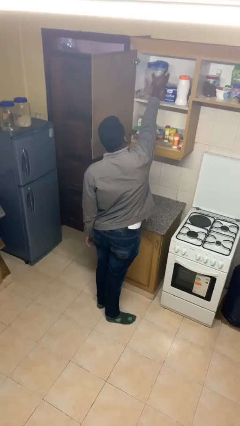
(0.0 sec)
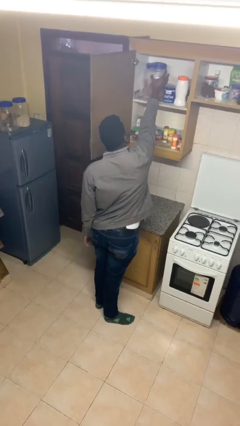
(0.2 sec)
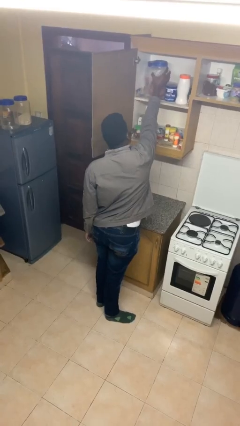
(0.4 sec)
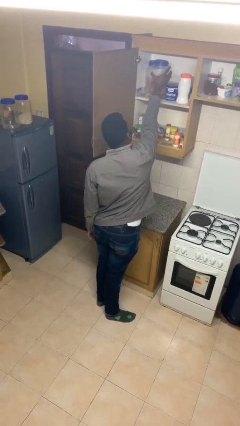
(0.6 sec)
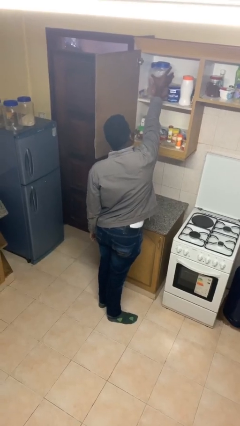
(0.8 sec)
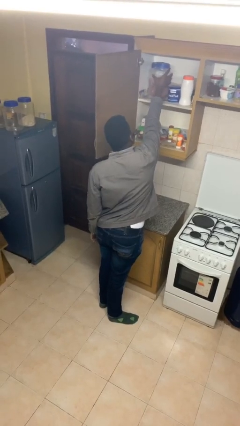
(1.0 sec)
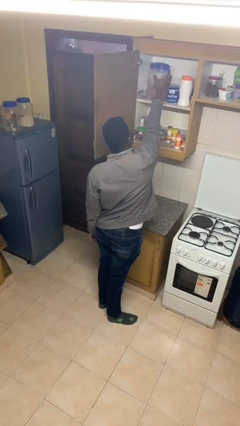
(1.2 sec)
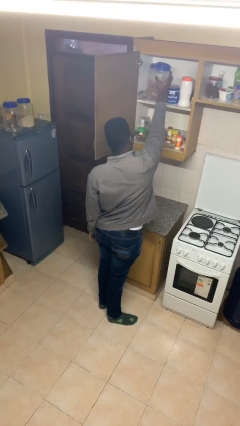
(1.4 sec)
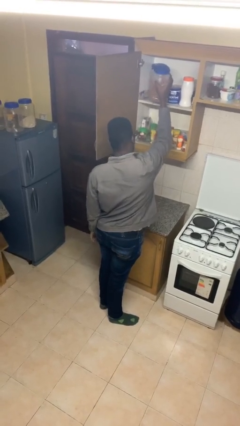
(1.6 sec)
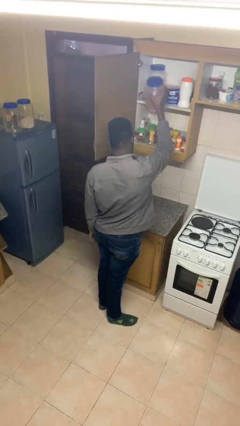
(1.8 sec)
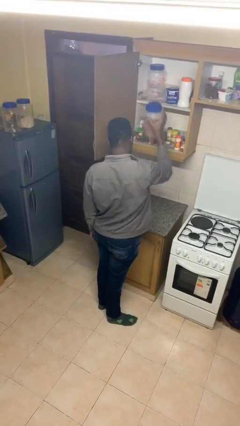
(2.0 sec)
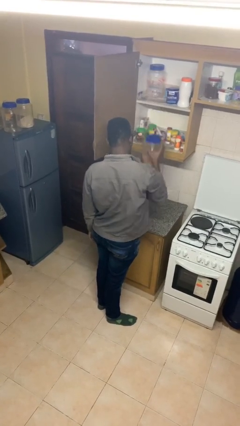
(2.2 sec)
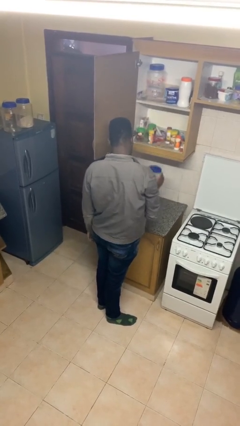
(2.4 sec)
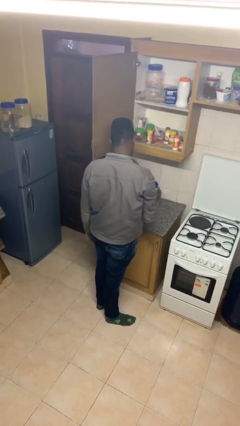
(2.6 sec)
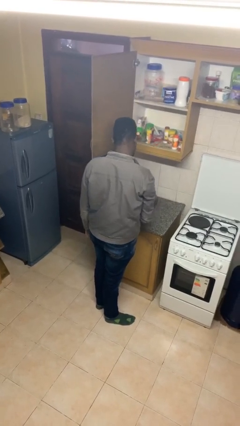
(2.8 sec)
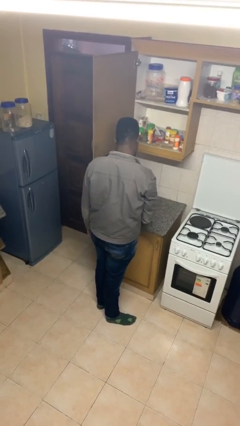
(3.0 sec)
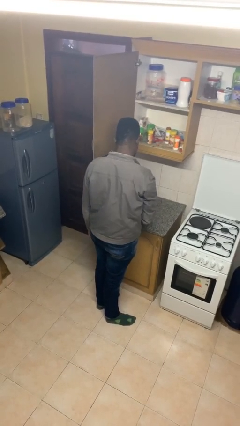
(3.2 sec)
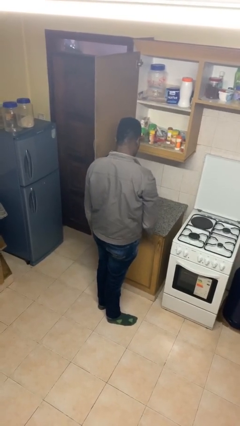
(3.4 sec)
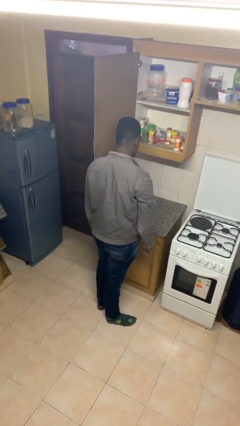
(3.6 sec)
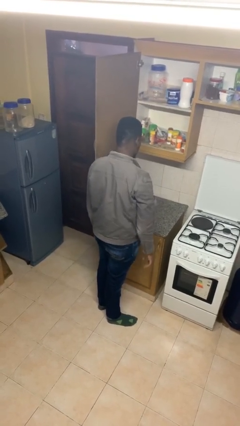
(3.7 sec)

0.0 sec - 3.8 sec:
person puts down object on table

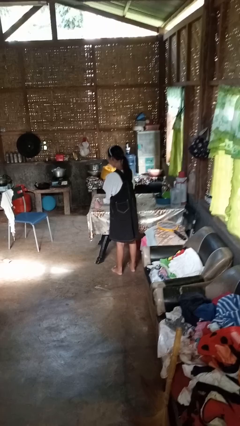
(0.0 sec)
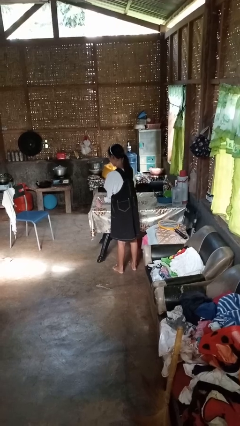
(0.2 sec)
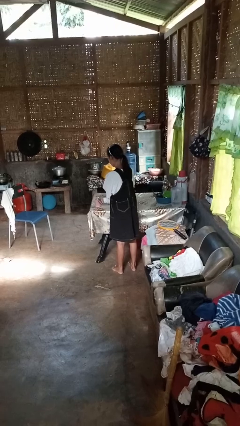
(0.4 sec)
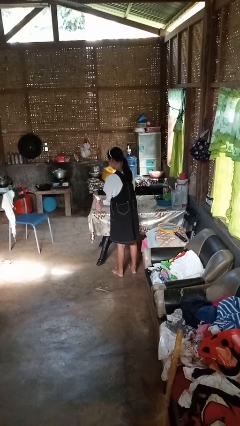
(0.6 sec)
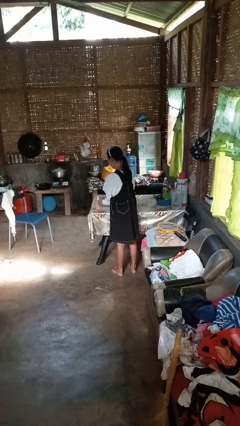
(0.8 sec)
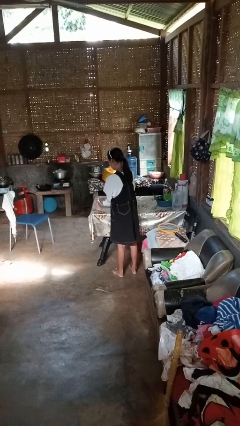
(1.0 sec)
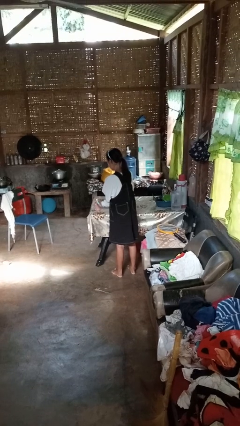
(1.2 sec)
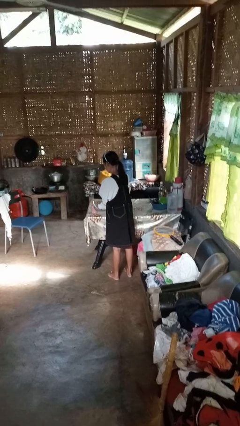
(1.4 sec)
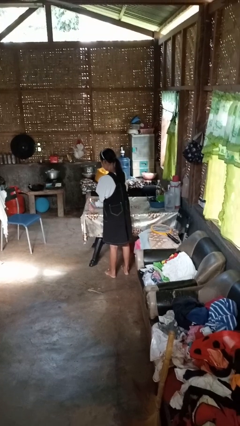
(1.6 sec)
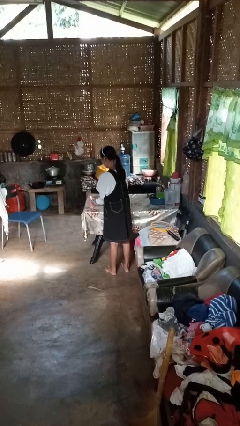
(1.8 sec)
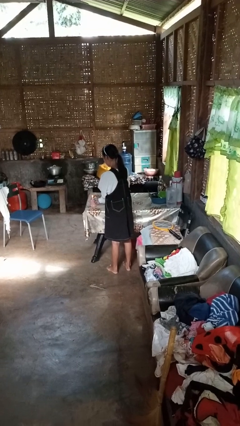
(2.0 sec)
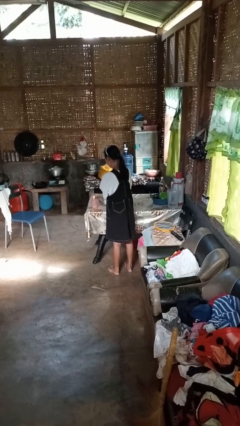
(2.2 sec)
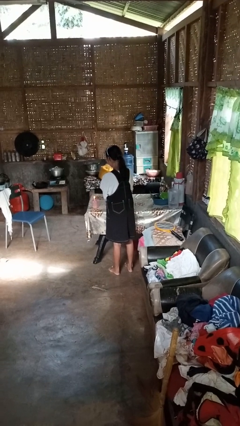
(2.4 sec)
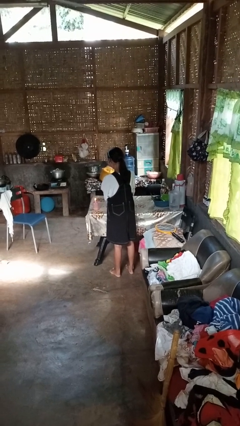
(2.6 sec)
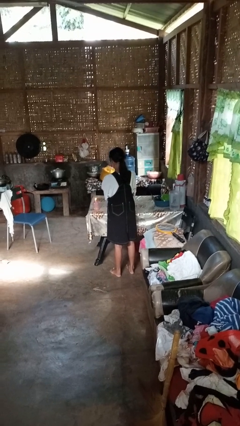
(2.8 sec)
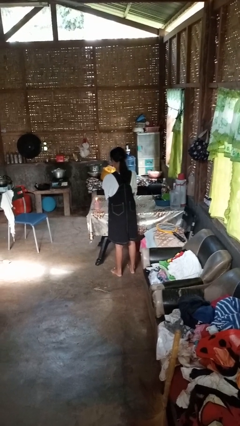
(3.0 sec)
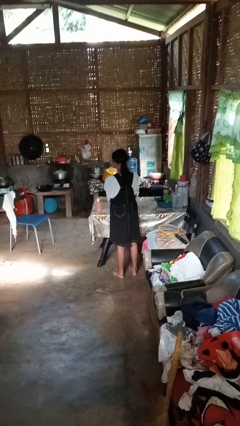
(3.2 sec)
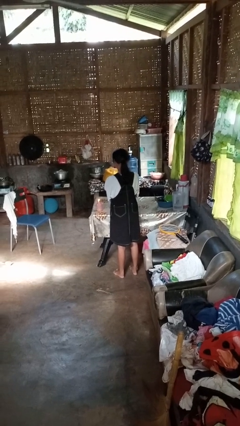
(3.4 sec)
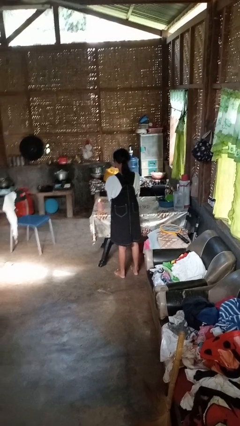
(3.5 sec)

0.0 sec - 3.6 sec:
person lights candle

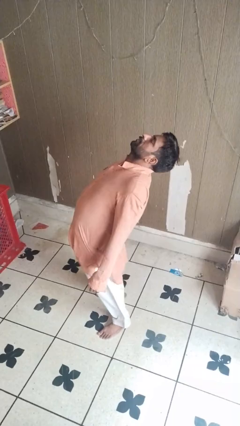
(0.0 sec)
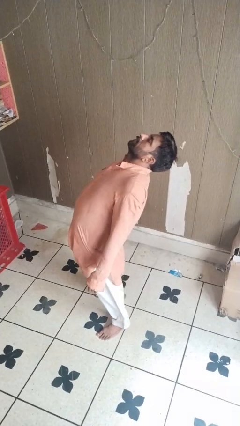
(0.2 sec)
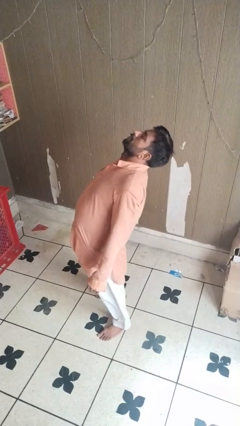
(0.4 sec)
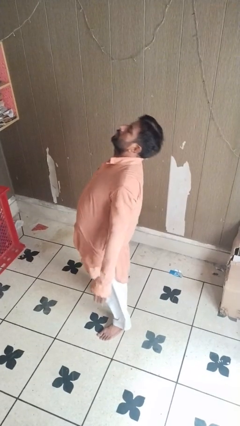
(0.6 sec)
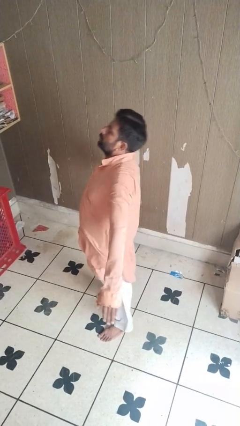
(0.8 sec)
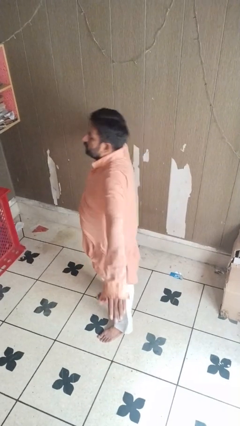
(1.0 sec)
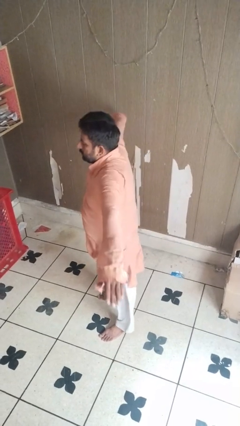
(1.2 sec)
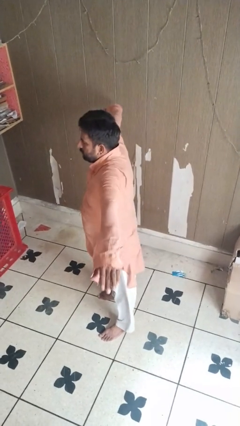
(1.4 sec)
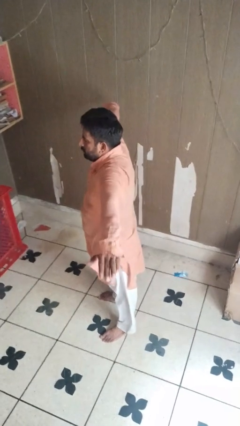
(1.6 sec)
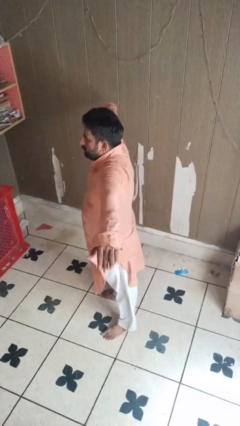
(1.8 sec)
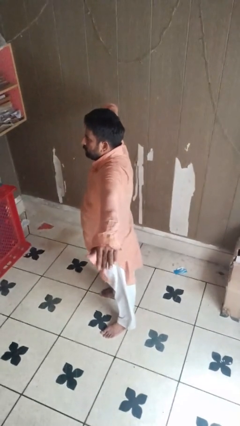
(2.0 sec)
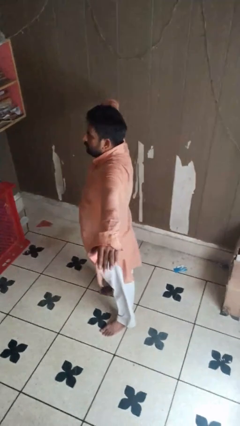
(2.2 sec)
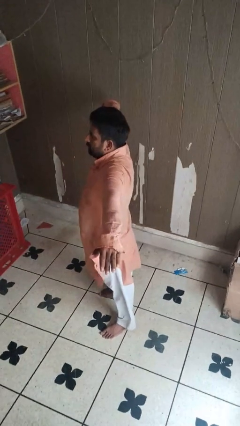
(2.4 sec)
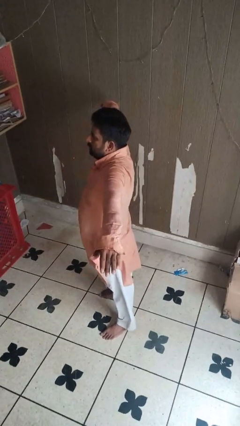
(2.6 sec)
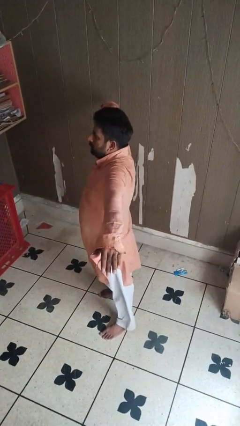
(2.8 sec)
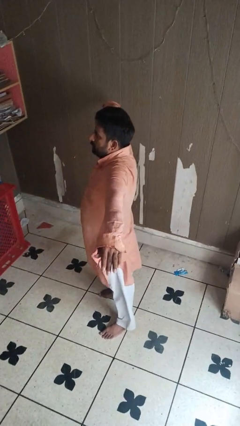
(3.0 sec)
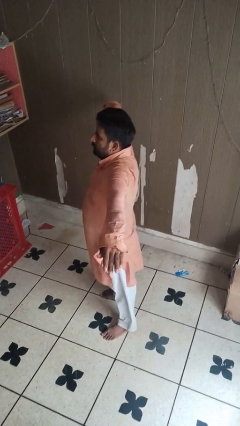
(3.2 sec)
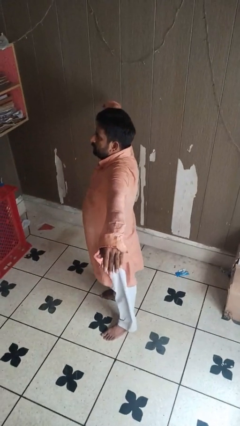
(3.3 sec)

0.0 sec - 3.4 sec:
person stretches arms to side

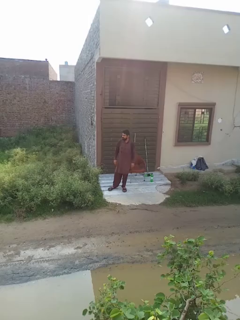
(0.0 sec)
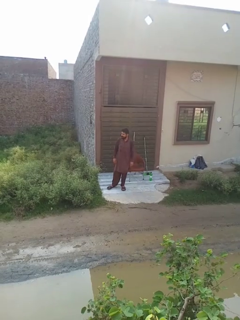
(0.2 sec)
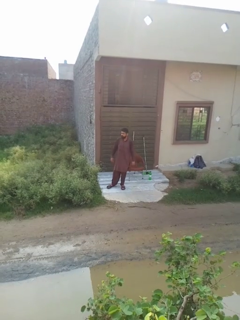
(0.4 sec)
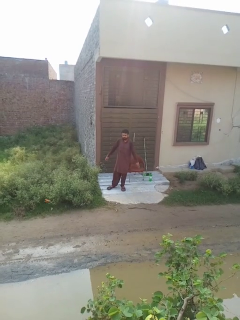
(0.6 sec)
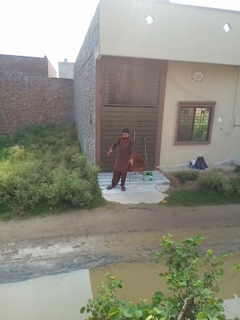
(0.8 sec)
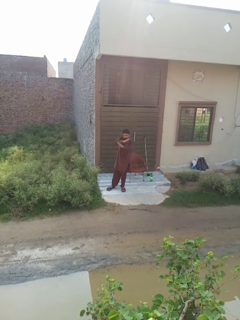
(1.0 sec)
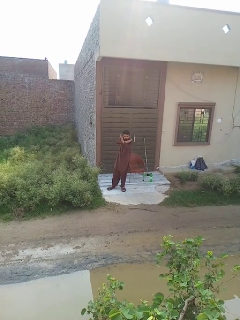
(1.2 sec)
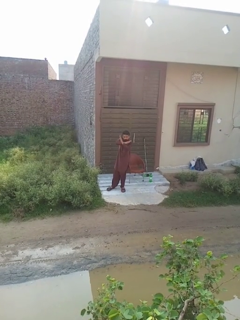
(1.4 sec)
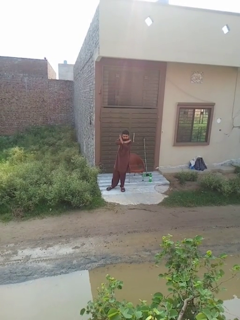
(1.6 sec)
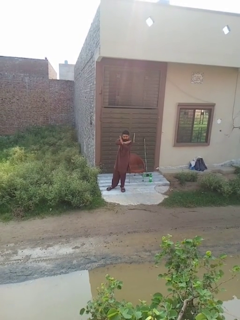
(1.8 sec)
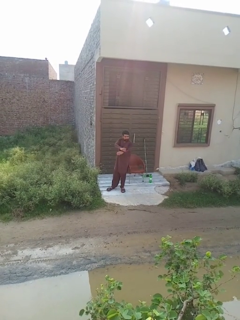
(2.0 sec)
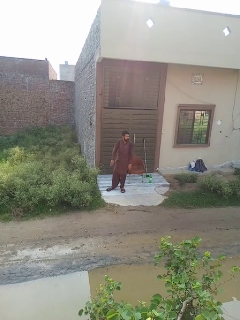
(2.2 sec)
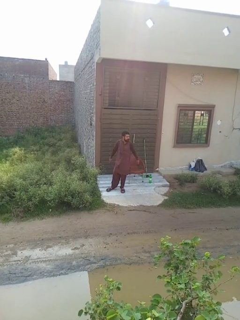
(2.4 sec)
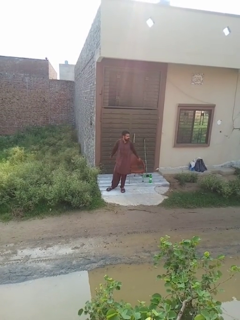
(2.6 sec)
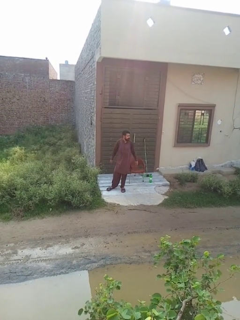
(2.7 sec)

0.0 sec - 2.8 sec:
person crosses arms

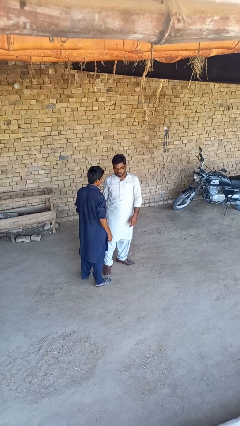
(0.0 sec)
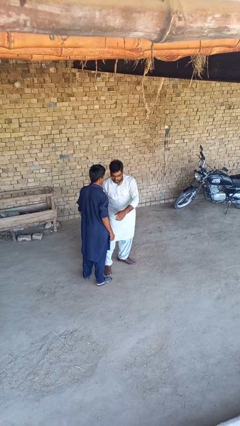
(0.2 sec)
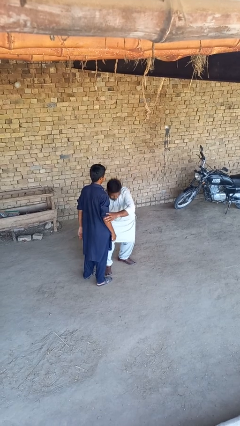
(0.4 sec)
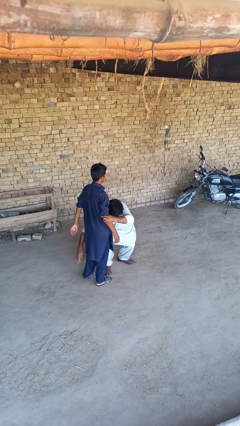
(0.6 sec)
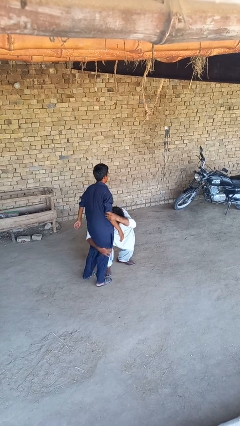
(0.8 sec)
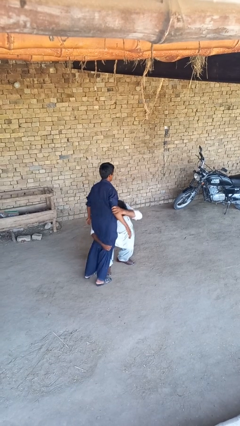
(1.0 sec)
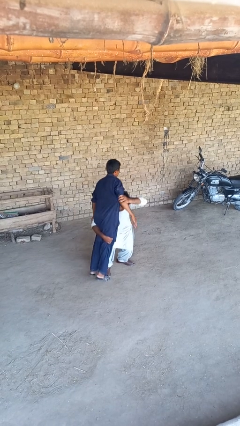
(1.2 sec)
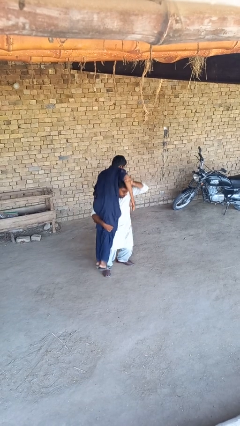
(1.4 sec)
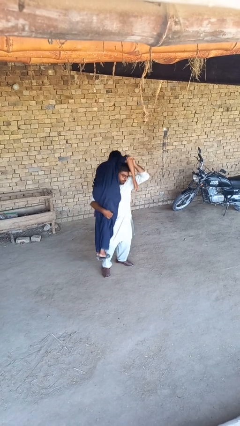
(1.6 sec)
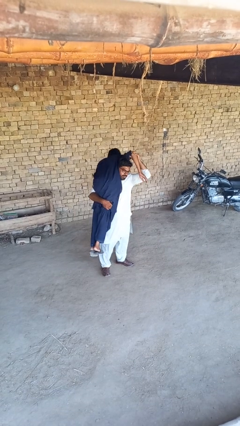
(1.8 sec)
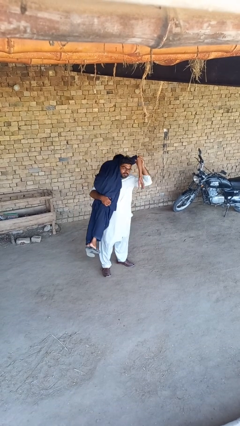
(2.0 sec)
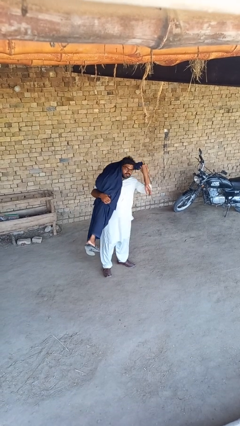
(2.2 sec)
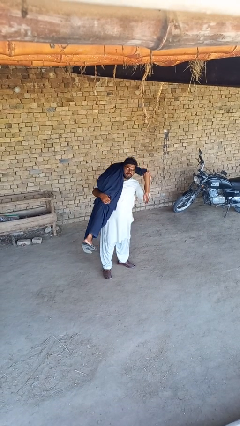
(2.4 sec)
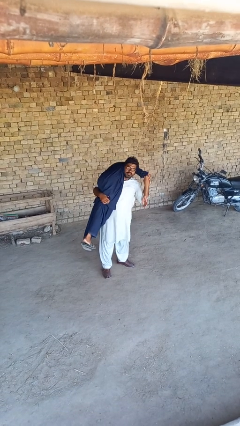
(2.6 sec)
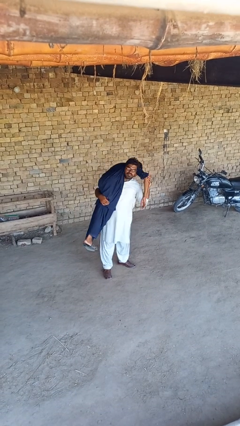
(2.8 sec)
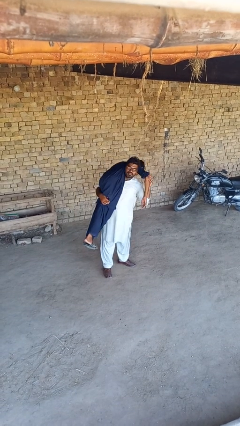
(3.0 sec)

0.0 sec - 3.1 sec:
person carries person over shoulder

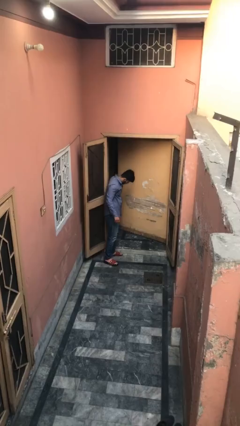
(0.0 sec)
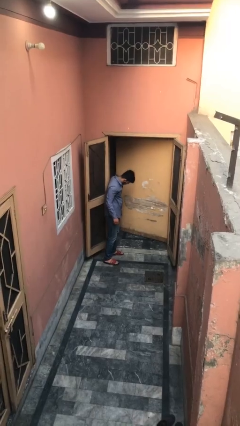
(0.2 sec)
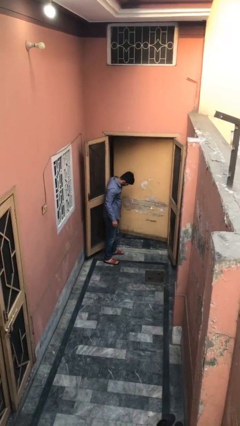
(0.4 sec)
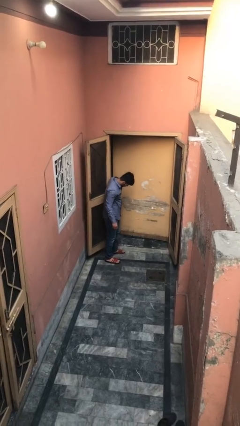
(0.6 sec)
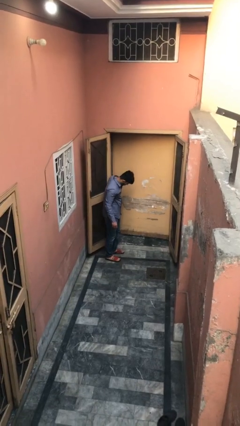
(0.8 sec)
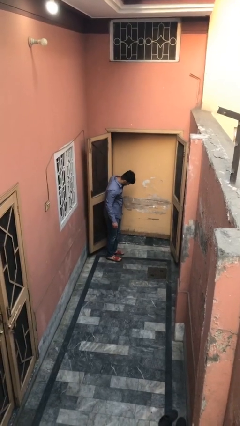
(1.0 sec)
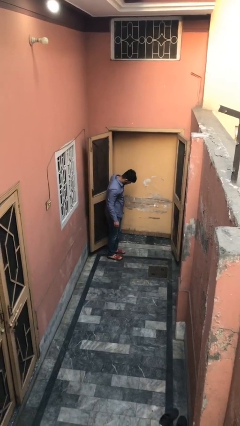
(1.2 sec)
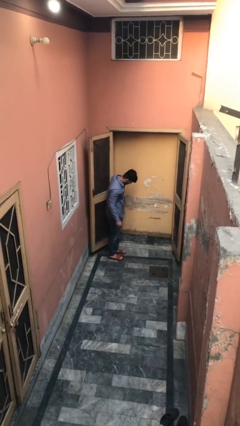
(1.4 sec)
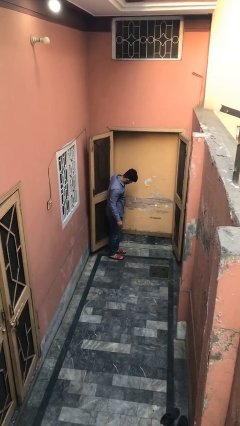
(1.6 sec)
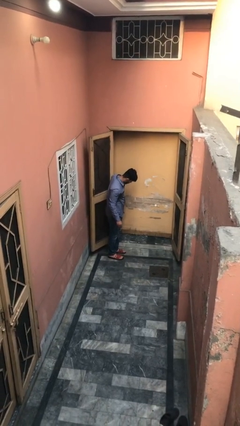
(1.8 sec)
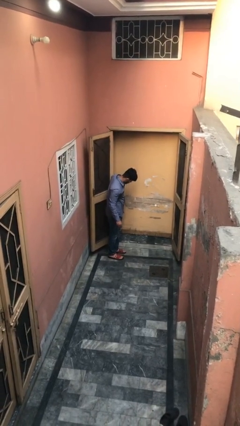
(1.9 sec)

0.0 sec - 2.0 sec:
person closes facility door
